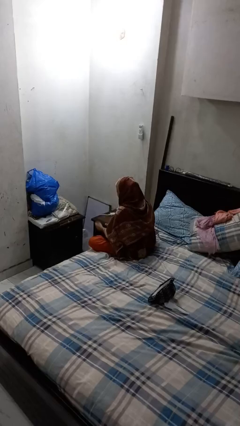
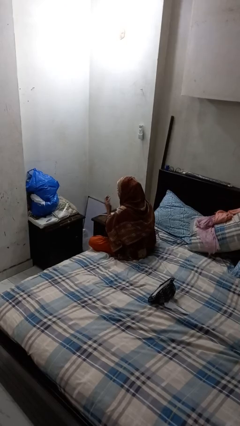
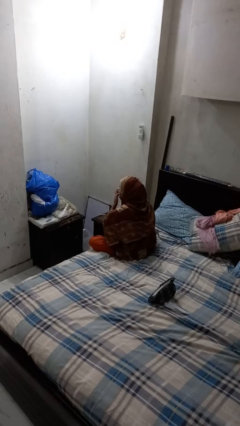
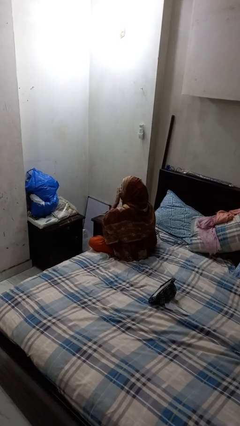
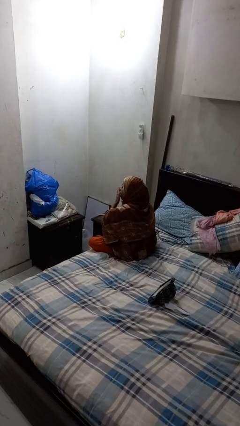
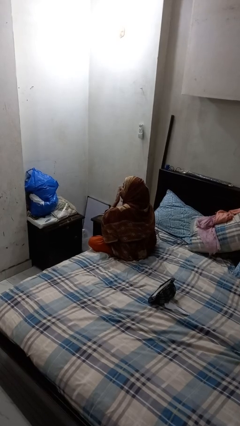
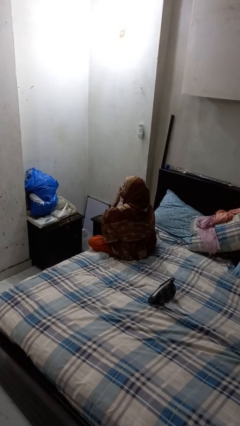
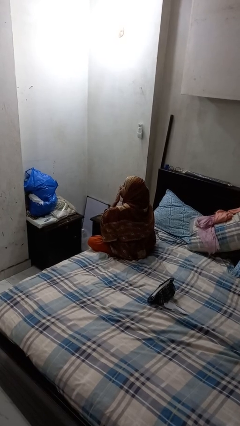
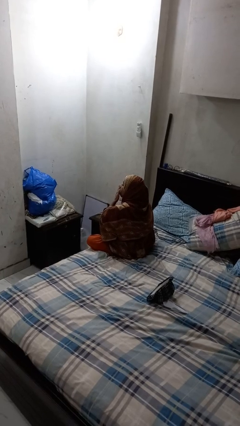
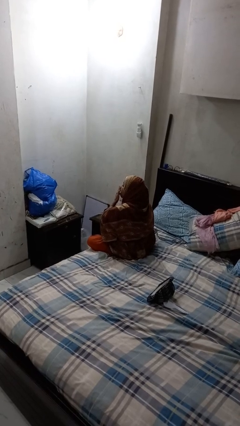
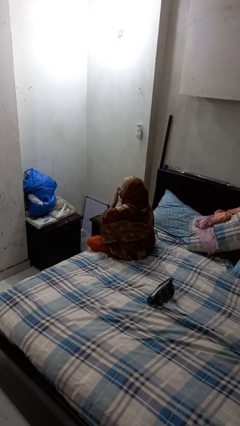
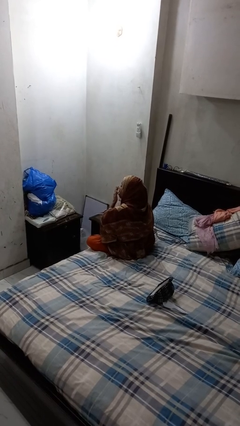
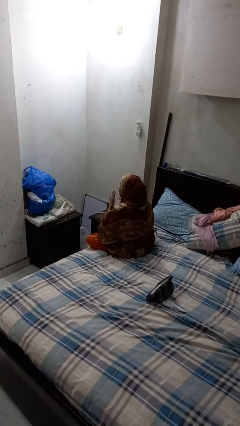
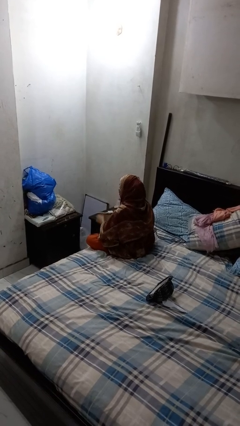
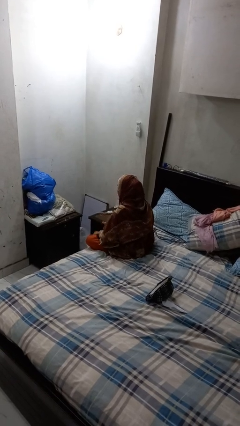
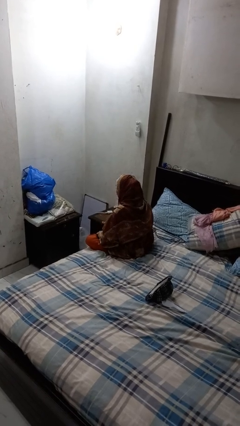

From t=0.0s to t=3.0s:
person yawns

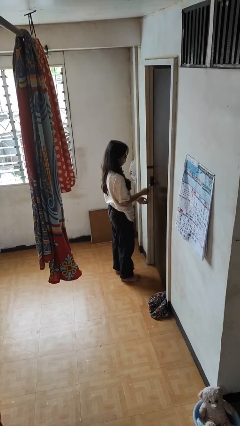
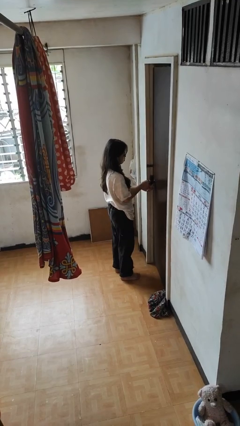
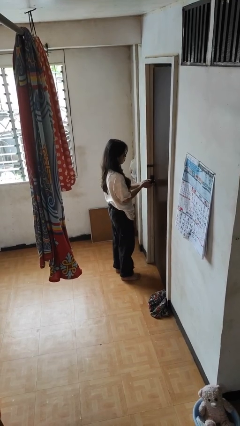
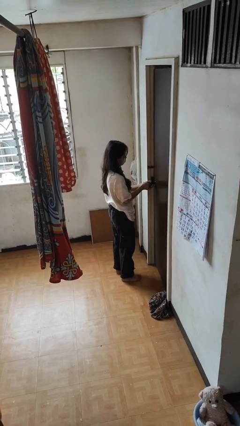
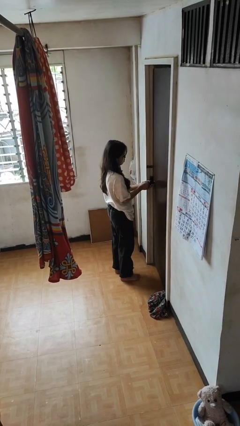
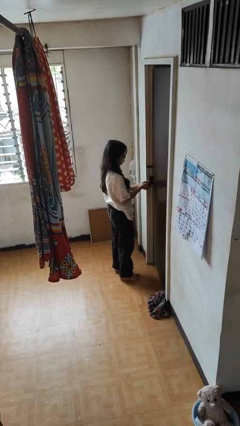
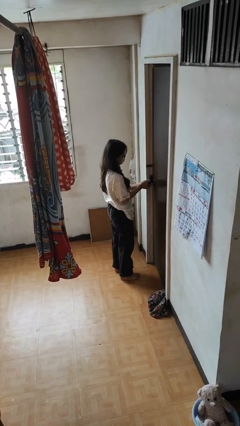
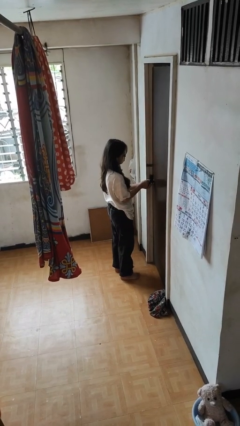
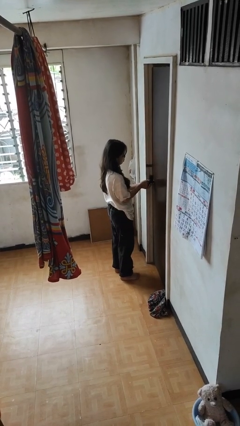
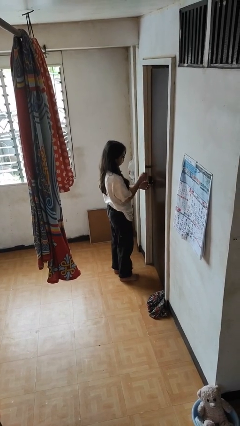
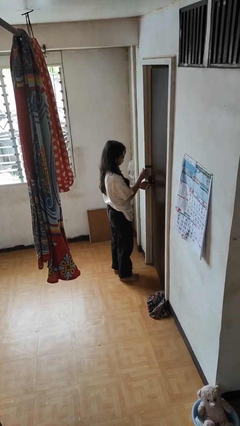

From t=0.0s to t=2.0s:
person unlocks door with keys

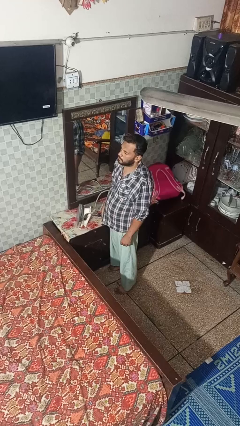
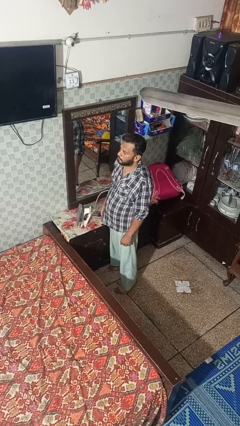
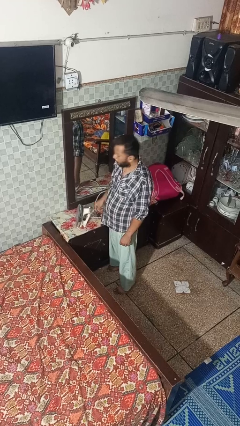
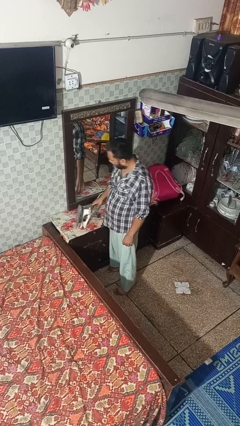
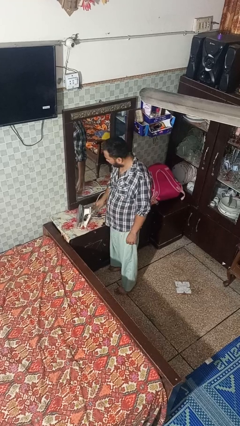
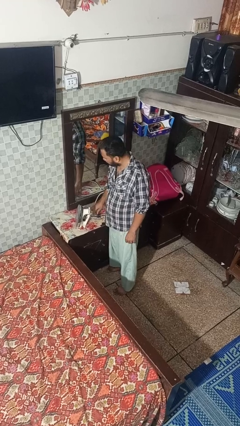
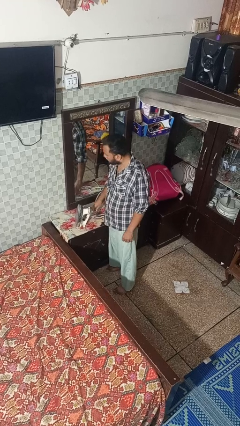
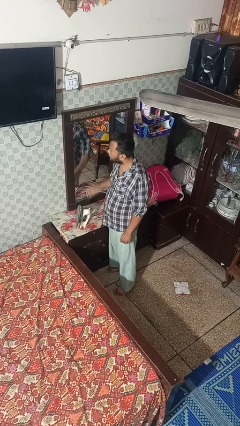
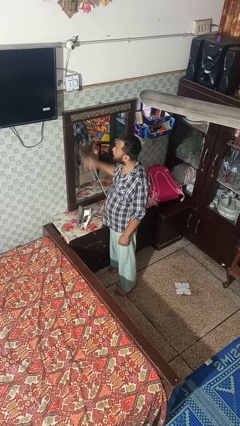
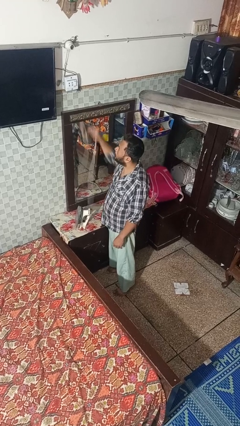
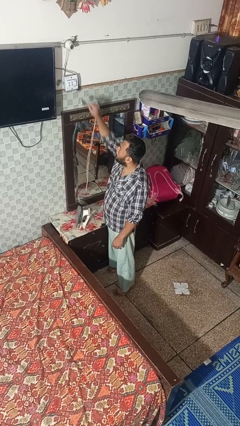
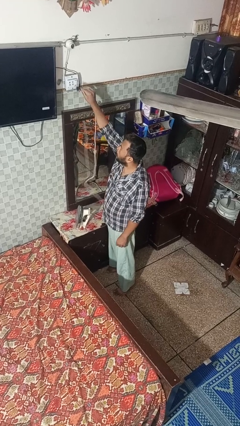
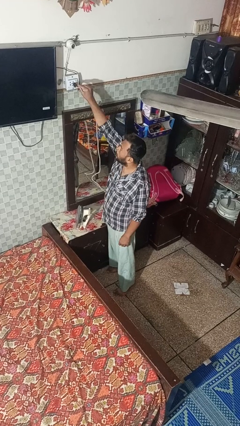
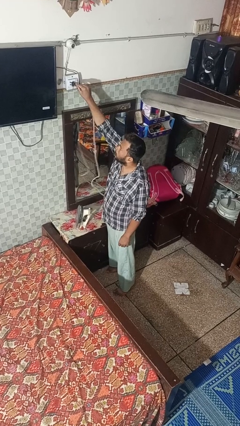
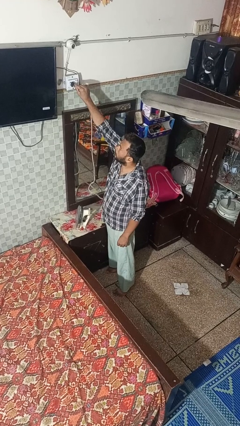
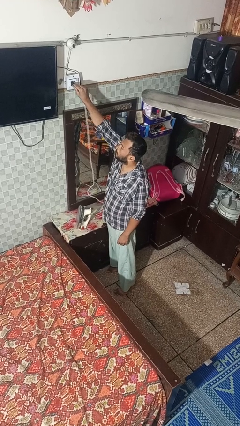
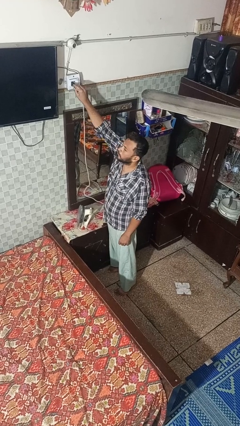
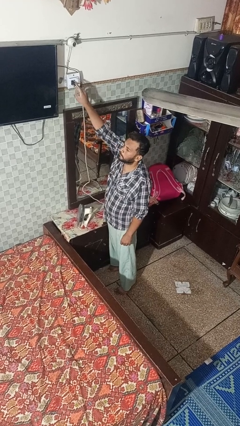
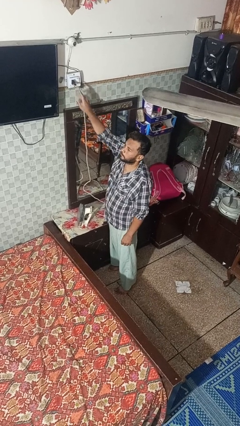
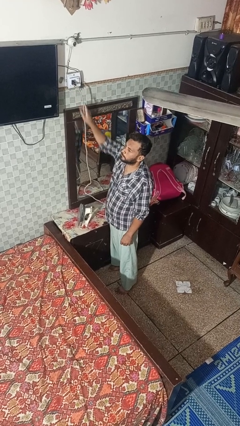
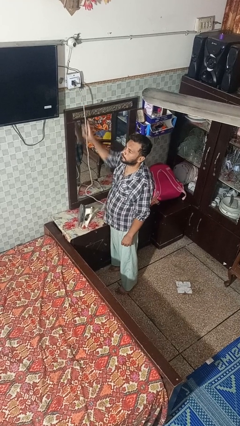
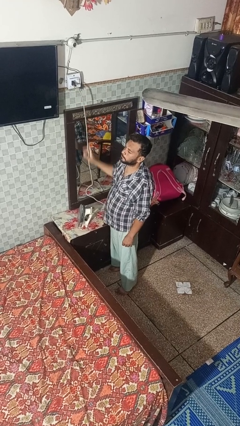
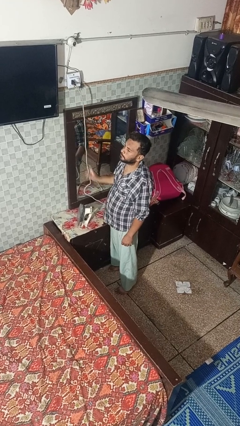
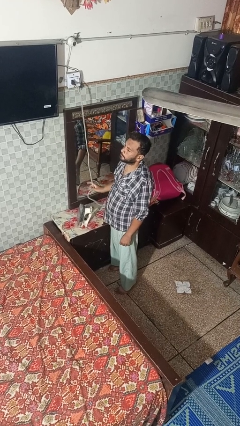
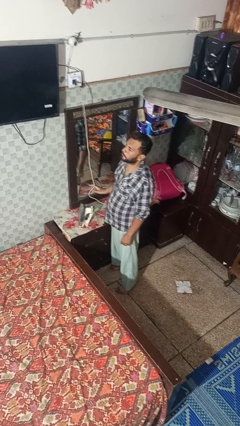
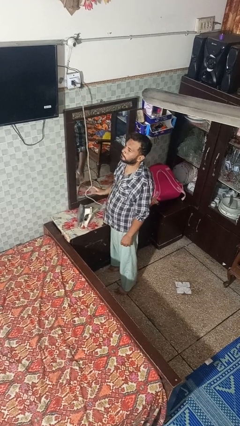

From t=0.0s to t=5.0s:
person plugs into electrical socket

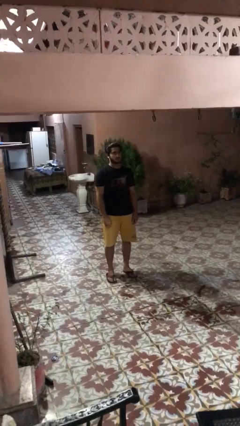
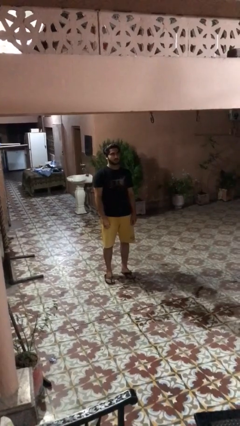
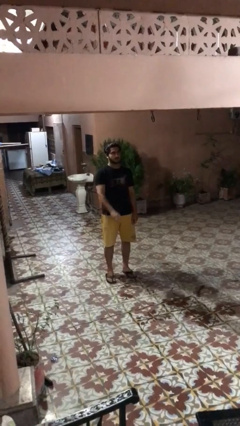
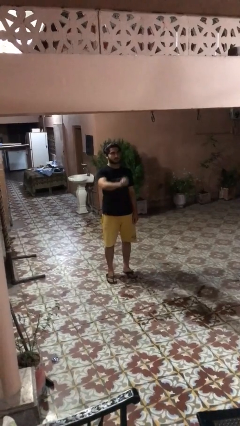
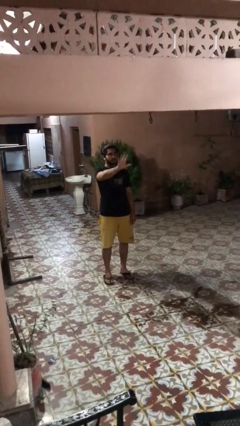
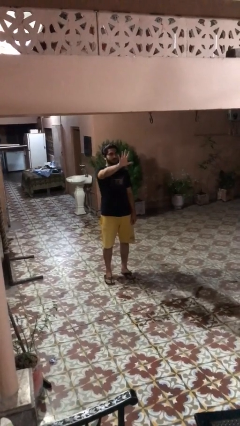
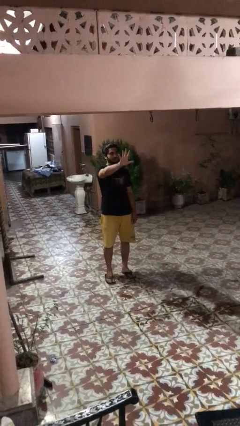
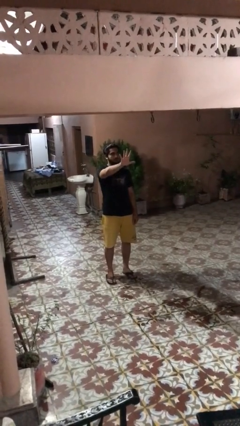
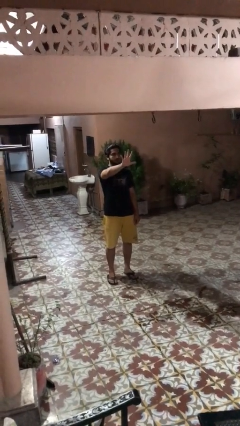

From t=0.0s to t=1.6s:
person gestures number five

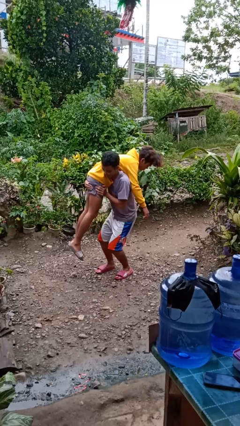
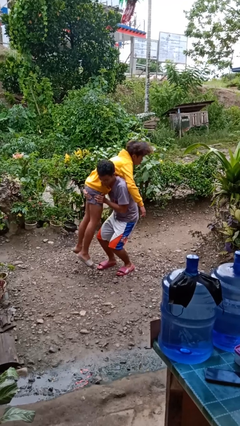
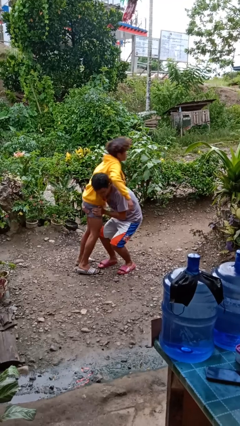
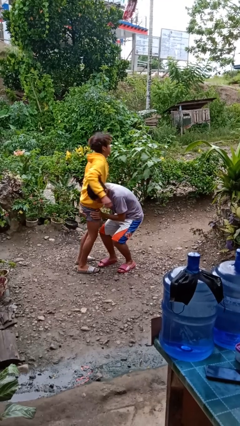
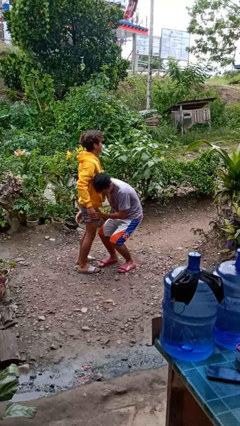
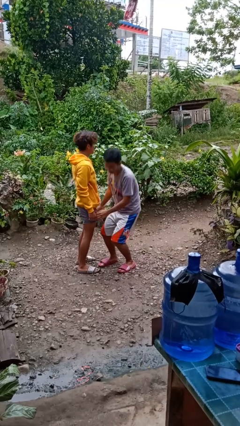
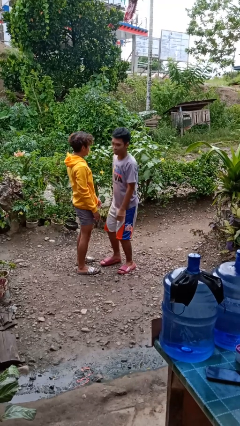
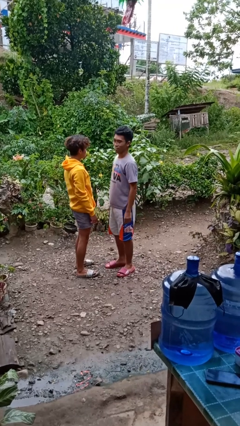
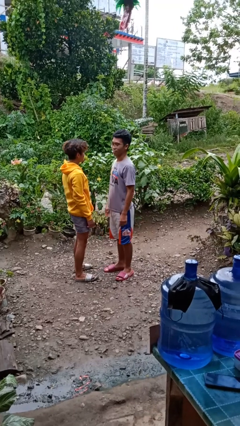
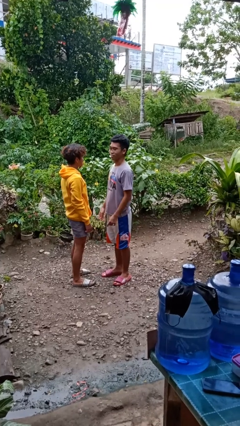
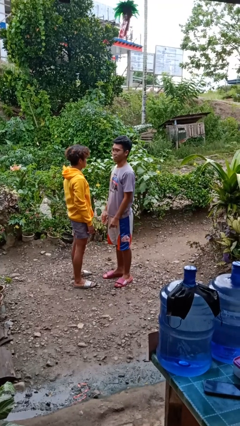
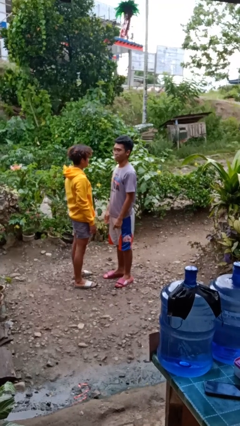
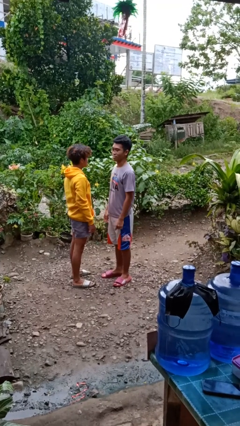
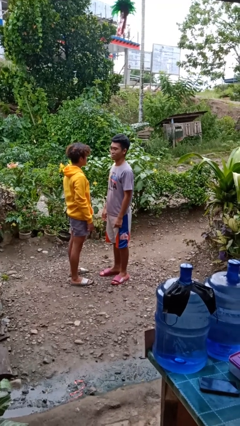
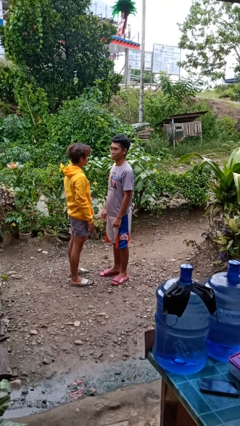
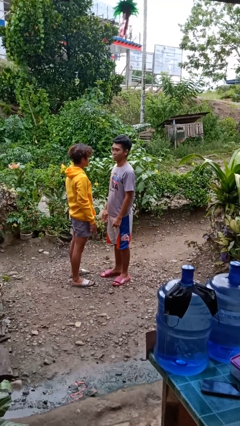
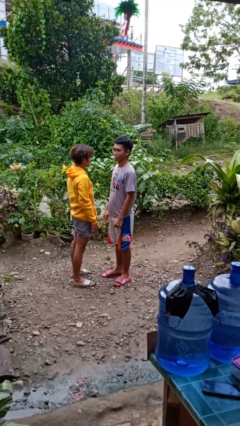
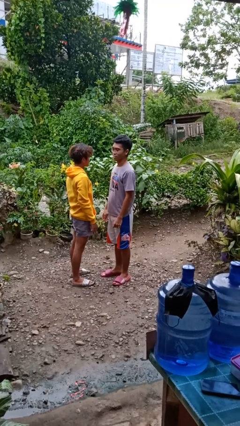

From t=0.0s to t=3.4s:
person puts down person

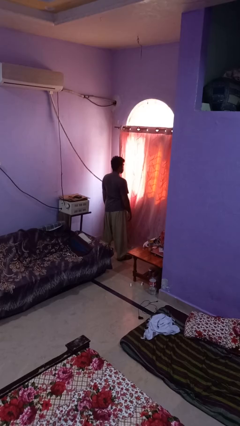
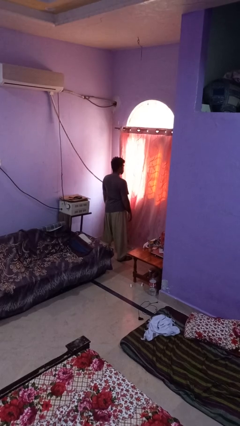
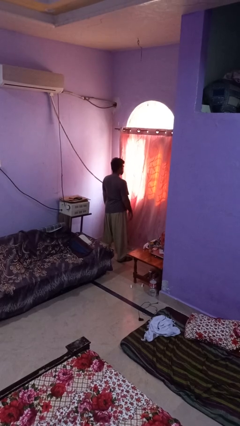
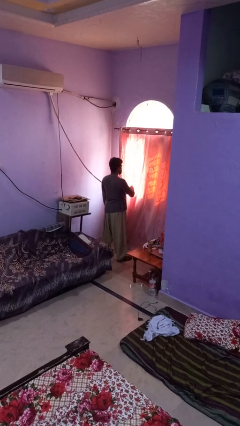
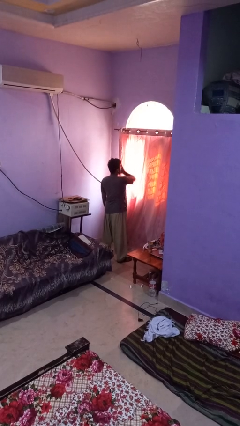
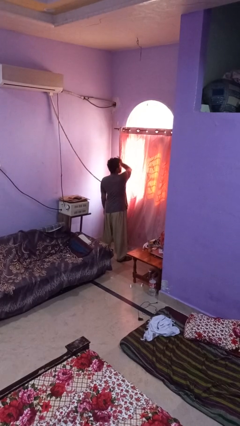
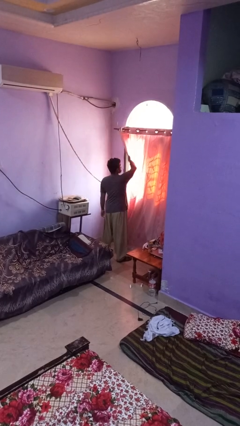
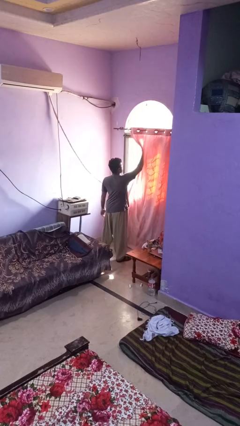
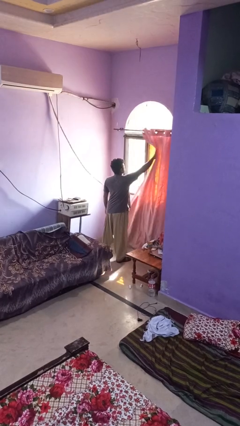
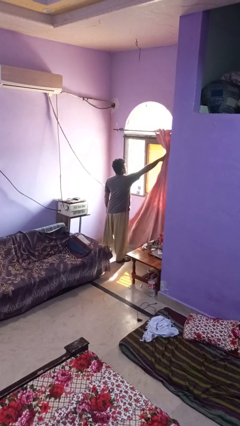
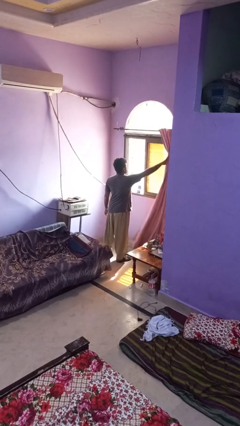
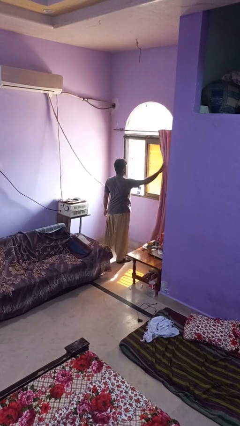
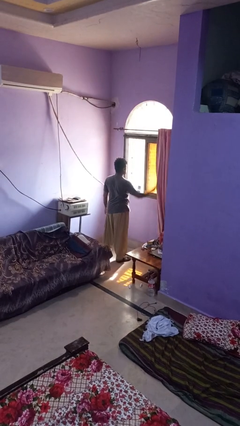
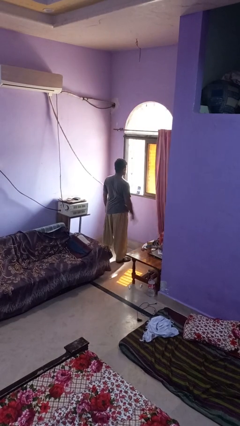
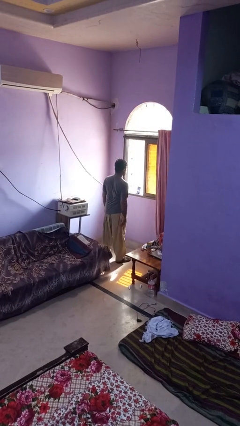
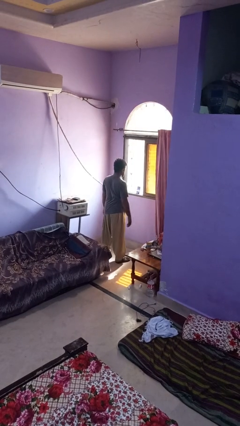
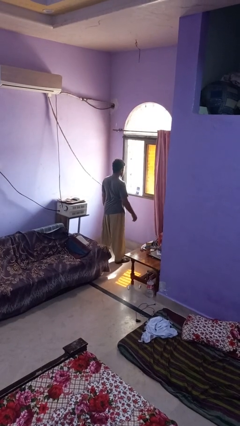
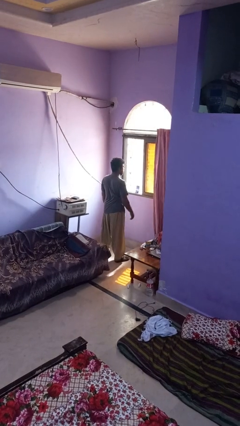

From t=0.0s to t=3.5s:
person opens curtains
